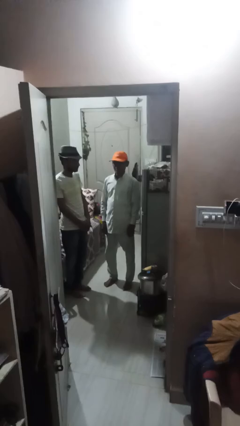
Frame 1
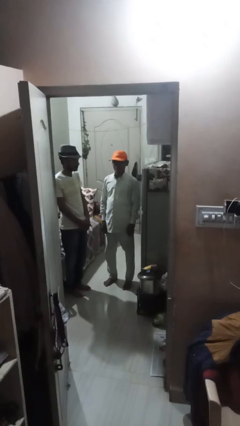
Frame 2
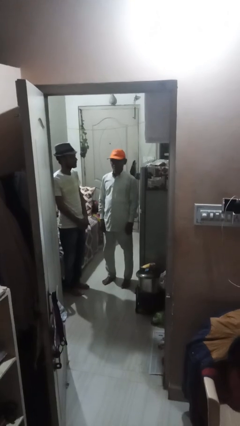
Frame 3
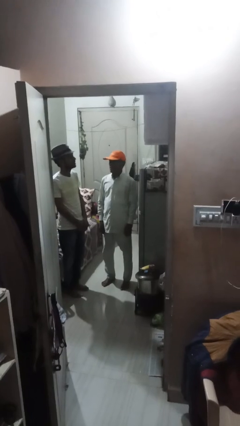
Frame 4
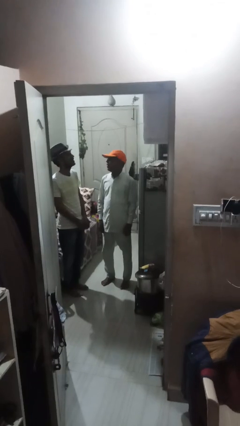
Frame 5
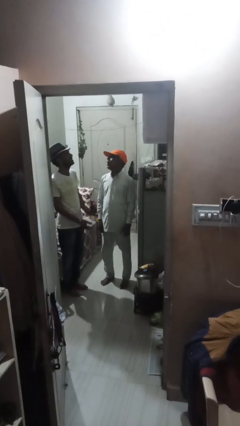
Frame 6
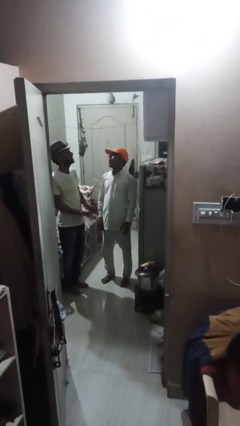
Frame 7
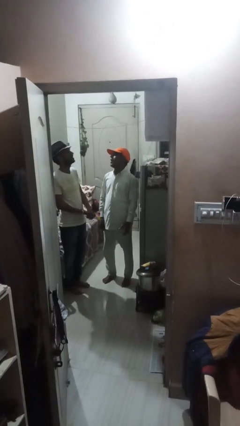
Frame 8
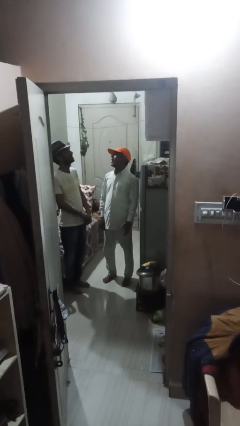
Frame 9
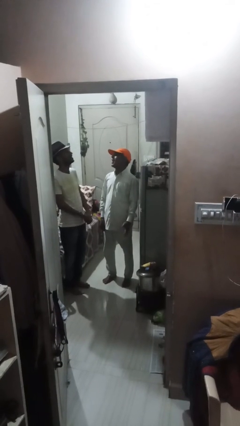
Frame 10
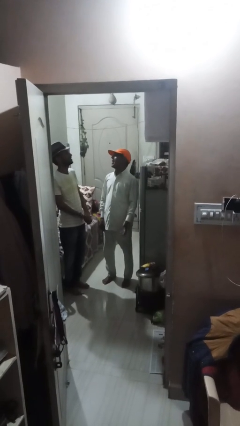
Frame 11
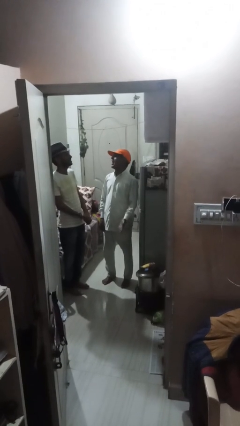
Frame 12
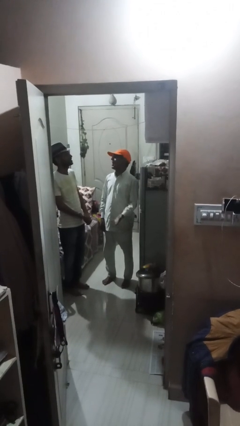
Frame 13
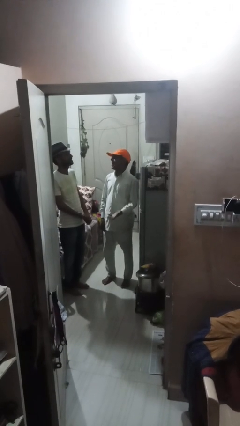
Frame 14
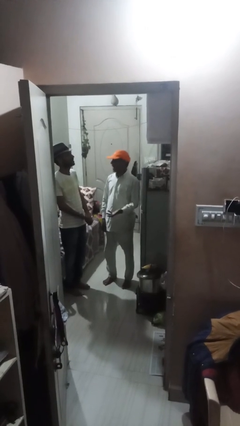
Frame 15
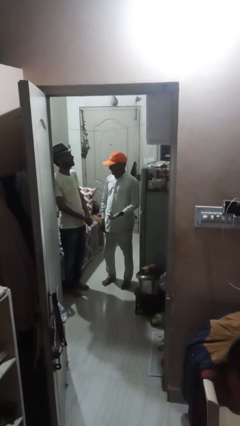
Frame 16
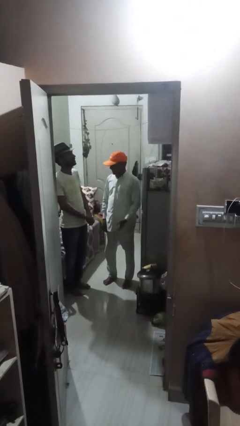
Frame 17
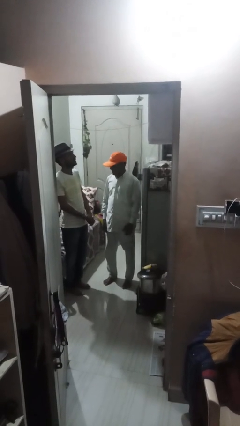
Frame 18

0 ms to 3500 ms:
person laughs with person

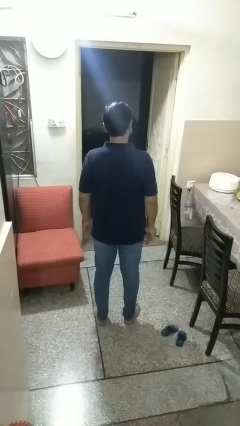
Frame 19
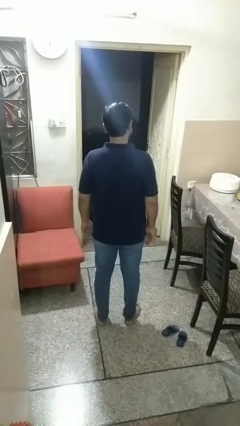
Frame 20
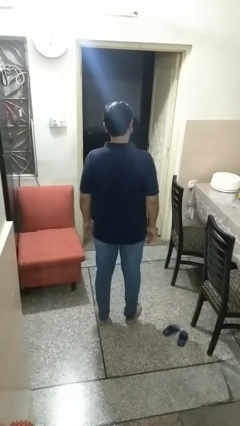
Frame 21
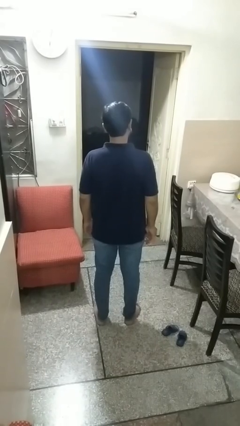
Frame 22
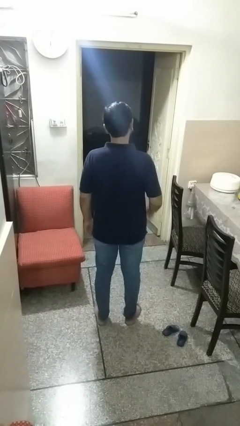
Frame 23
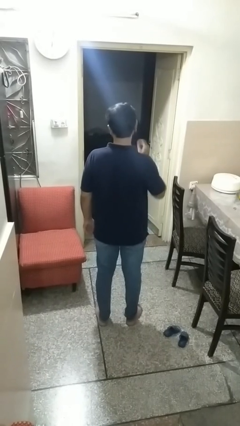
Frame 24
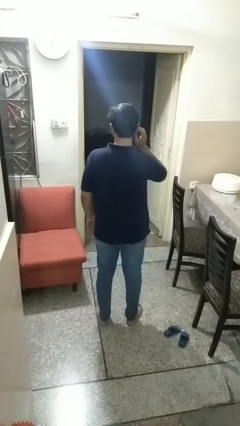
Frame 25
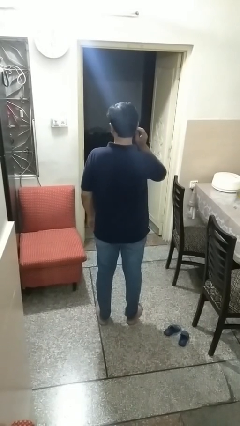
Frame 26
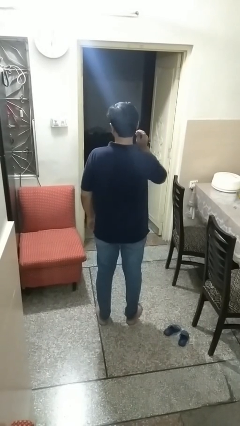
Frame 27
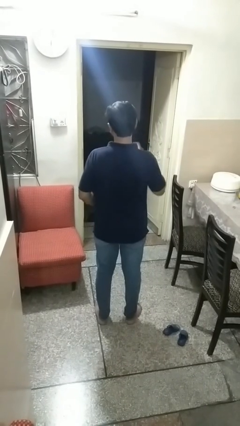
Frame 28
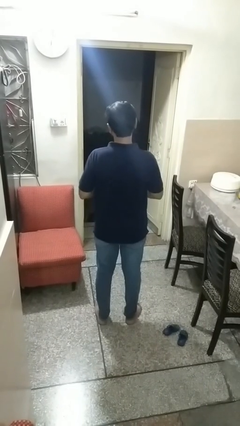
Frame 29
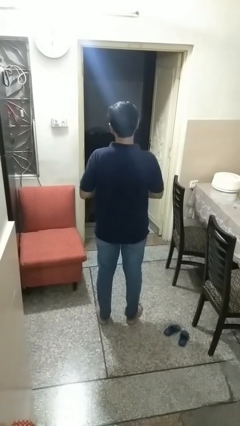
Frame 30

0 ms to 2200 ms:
person takes off earrings

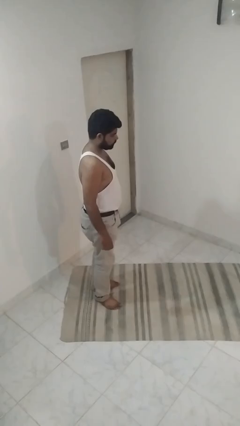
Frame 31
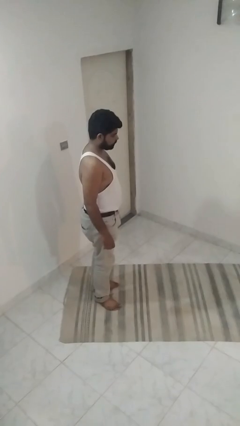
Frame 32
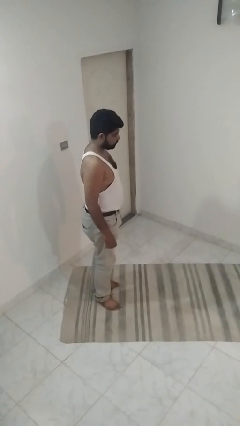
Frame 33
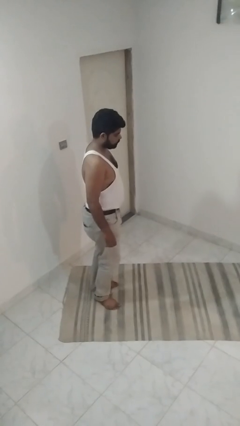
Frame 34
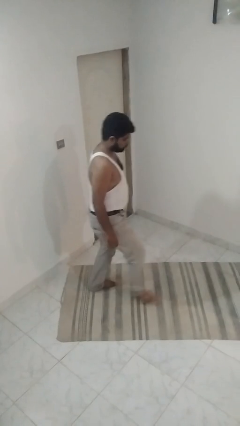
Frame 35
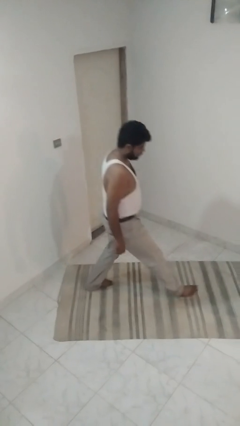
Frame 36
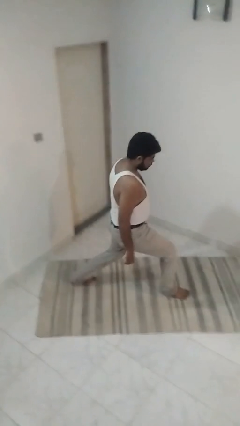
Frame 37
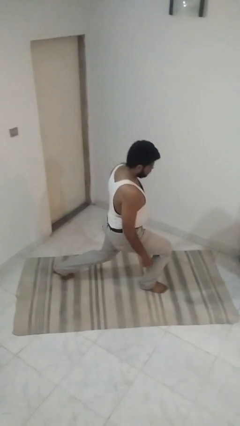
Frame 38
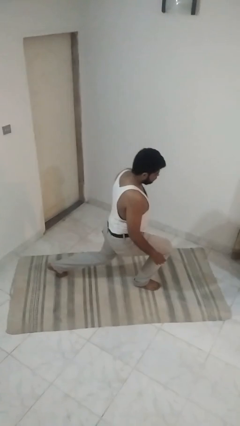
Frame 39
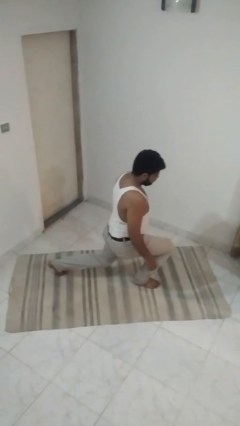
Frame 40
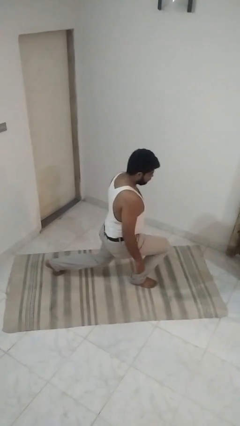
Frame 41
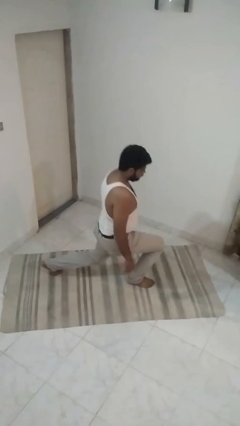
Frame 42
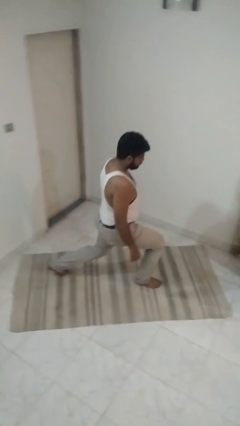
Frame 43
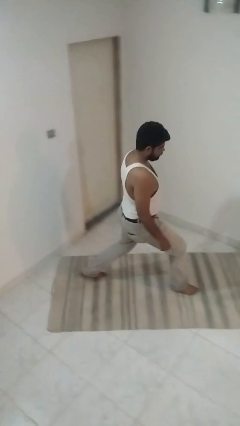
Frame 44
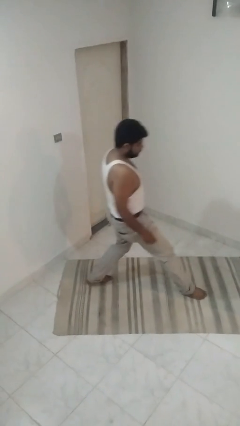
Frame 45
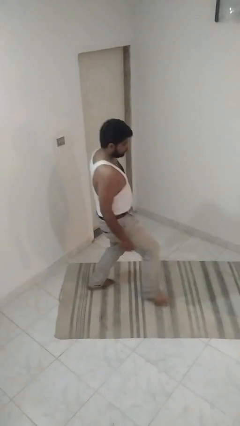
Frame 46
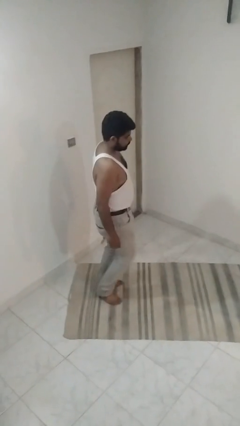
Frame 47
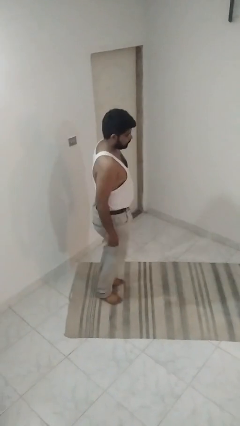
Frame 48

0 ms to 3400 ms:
person exercises with lunges

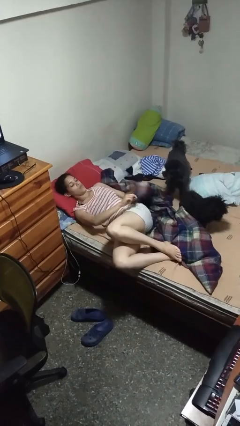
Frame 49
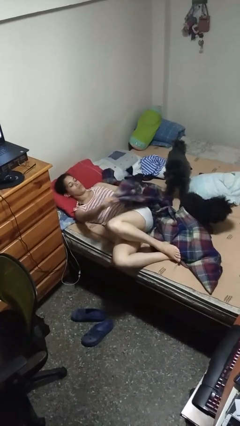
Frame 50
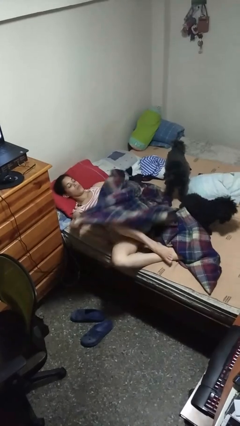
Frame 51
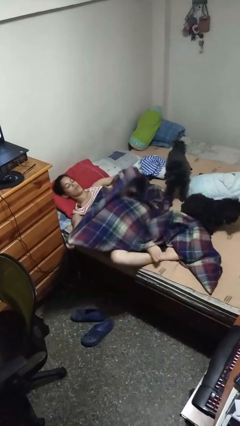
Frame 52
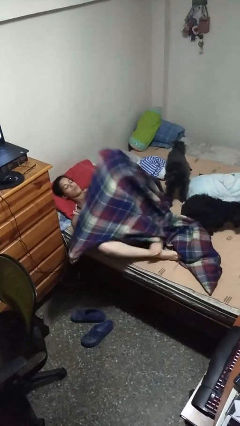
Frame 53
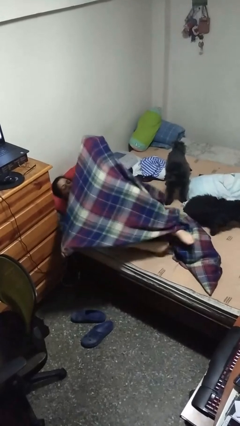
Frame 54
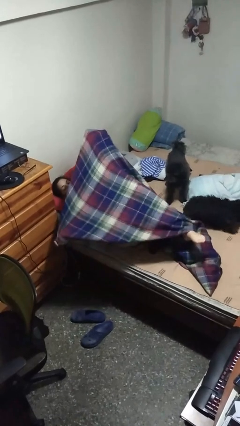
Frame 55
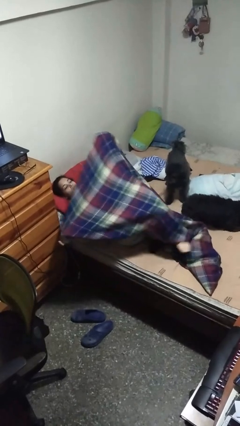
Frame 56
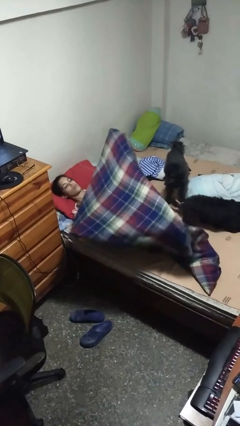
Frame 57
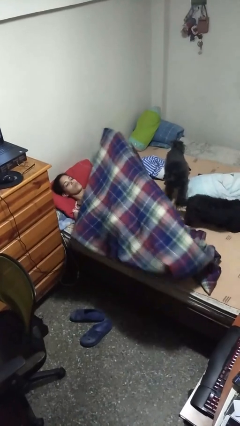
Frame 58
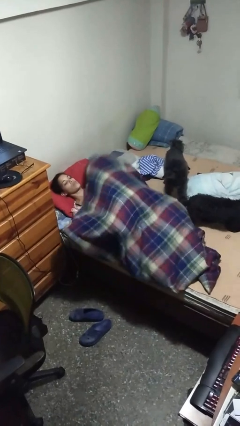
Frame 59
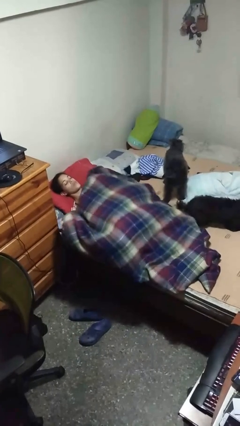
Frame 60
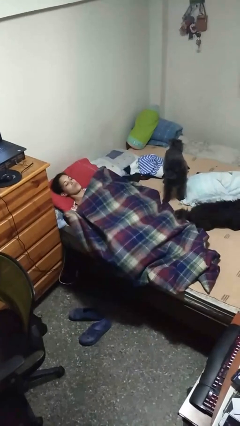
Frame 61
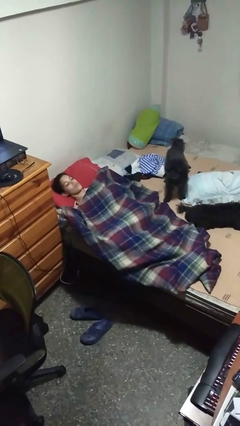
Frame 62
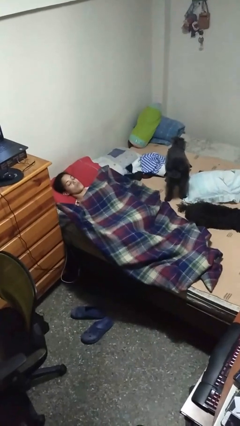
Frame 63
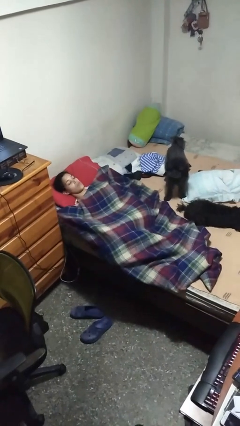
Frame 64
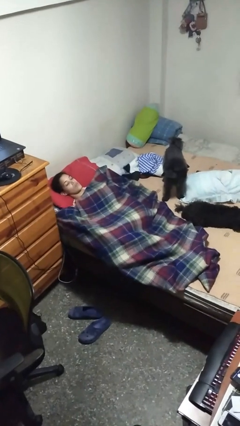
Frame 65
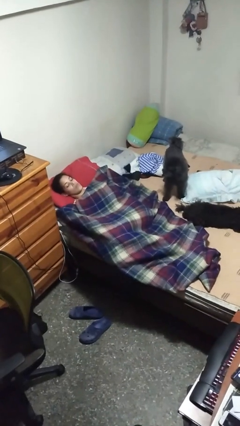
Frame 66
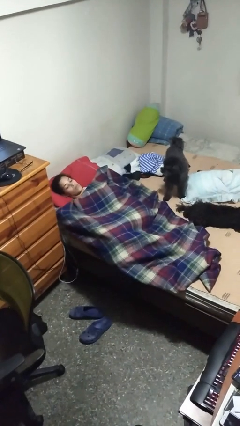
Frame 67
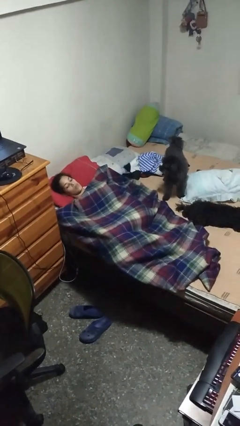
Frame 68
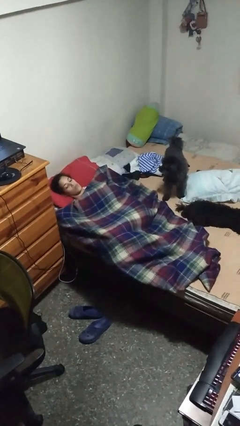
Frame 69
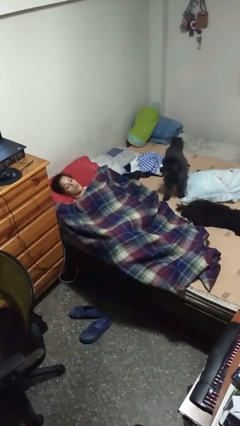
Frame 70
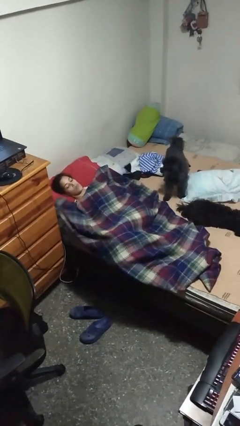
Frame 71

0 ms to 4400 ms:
person covers with bedsheets

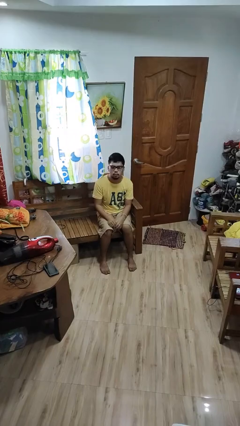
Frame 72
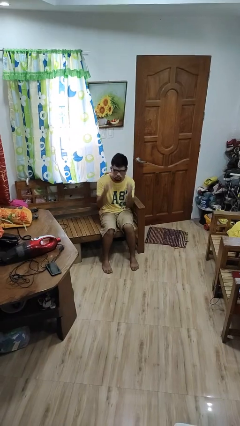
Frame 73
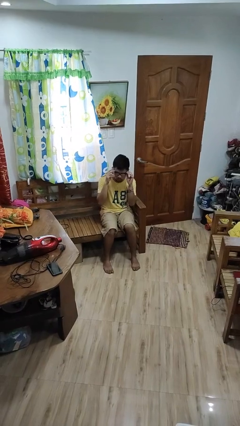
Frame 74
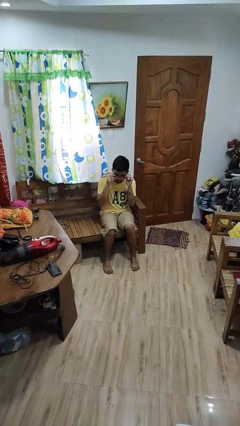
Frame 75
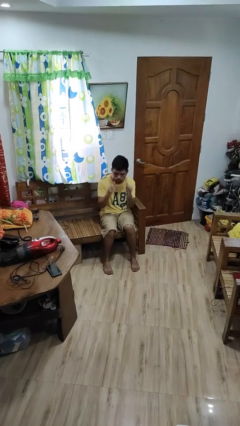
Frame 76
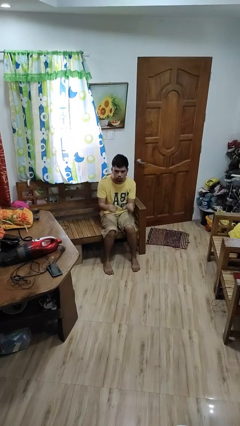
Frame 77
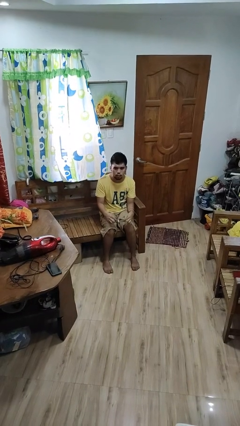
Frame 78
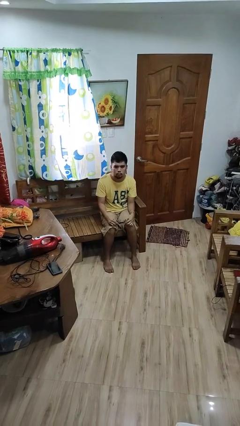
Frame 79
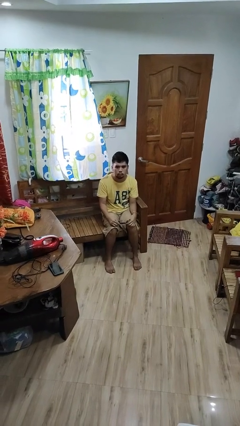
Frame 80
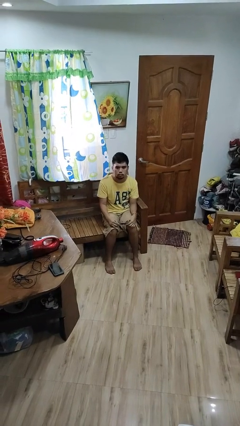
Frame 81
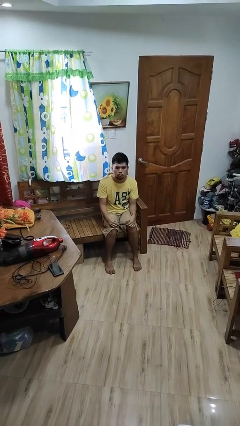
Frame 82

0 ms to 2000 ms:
person takes off glasses

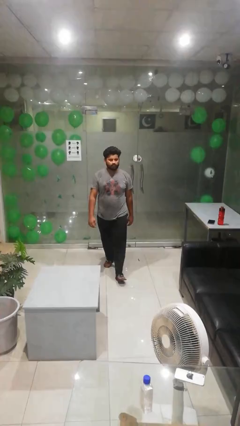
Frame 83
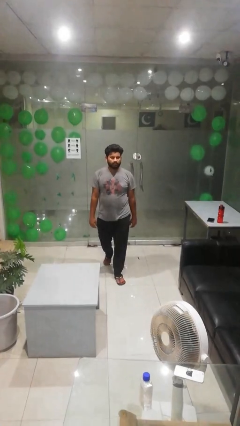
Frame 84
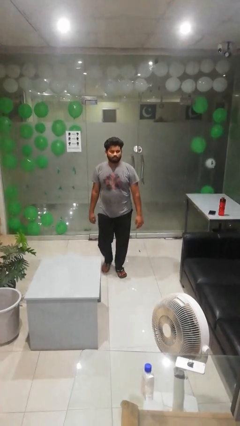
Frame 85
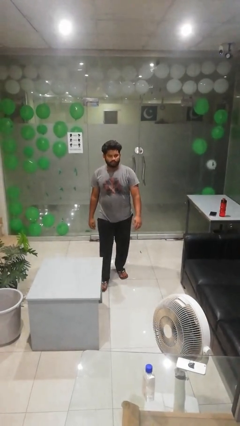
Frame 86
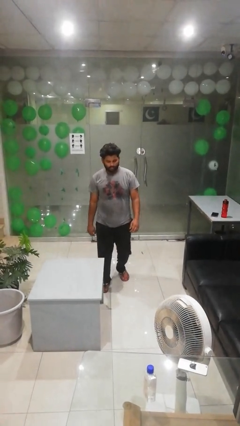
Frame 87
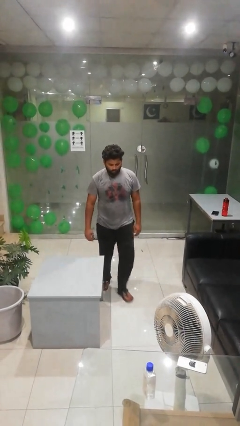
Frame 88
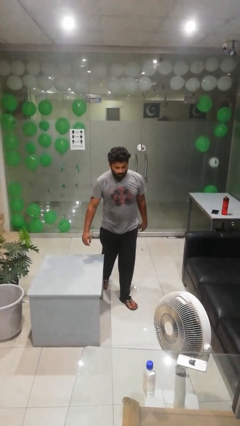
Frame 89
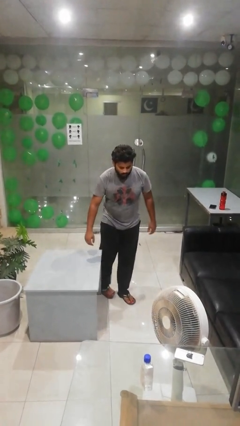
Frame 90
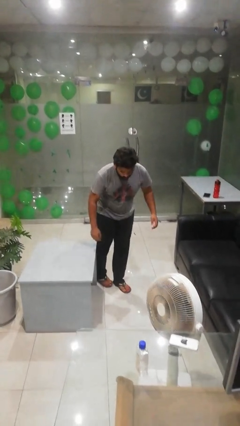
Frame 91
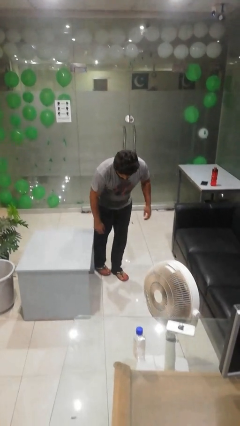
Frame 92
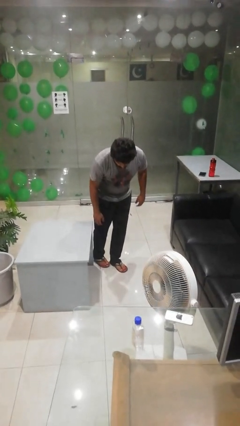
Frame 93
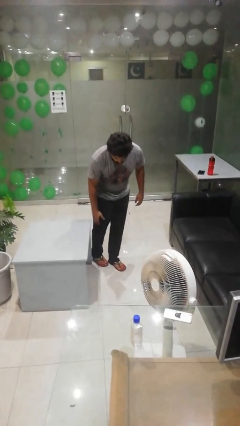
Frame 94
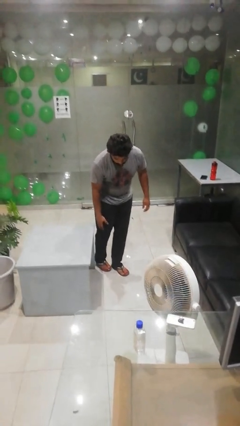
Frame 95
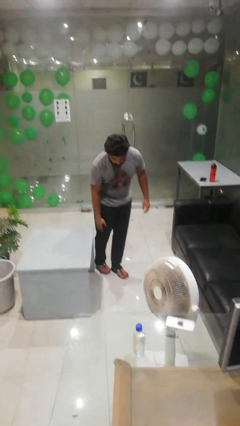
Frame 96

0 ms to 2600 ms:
person bumps into table
